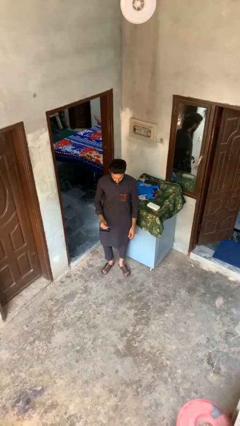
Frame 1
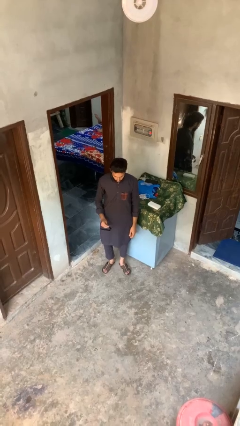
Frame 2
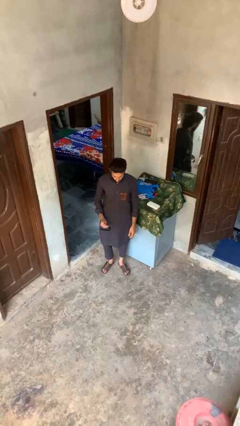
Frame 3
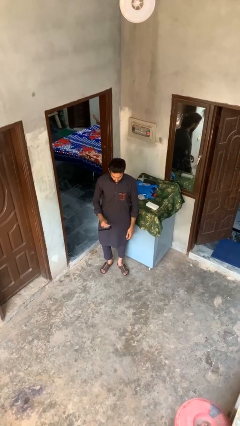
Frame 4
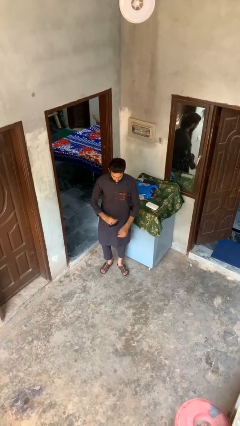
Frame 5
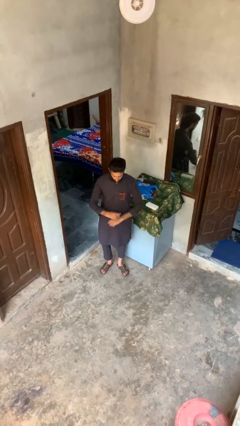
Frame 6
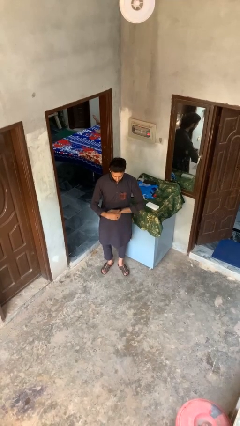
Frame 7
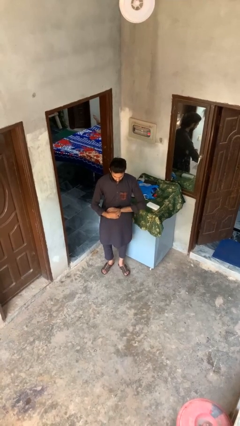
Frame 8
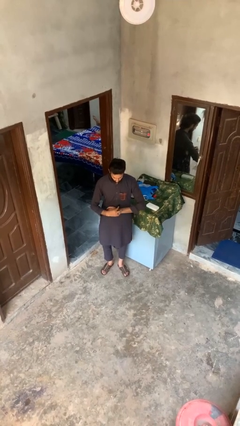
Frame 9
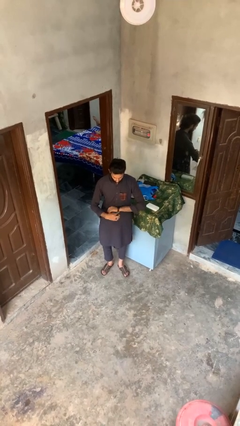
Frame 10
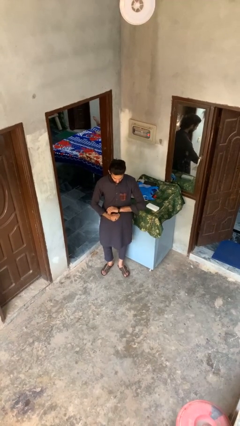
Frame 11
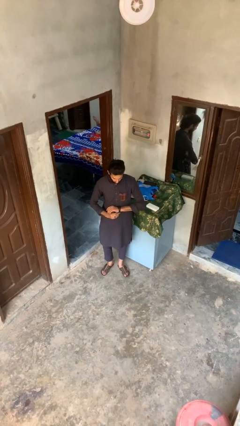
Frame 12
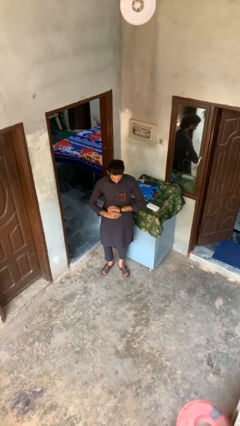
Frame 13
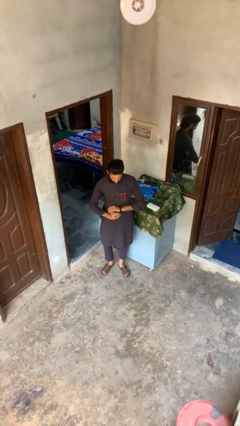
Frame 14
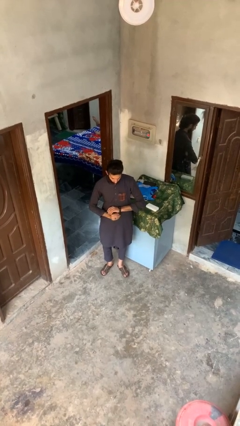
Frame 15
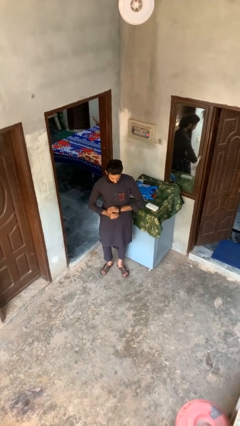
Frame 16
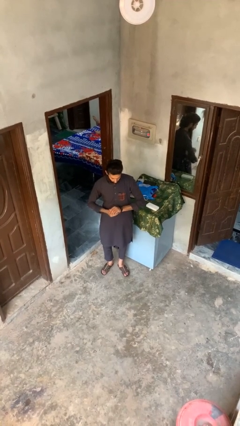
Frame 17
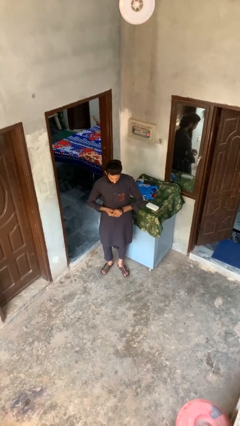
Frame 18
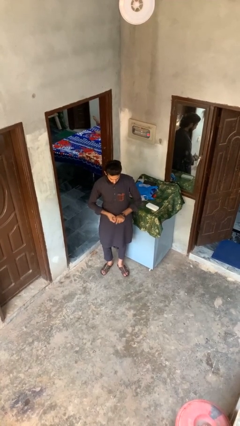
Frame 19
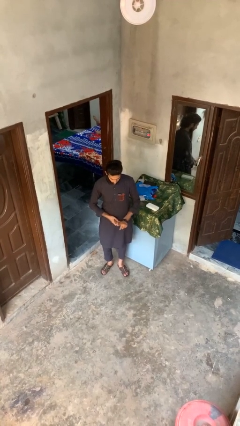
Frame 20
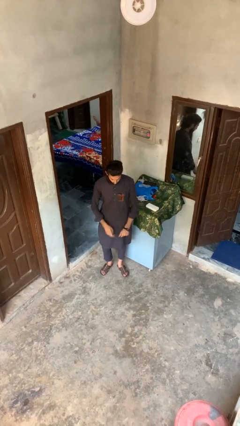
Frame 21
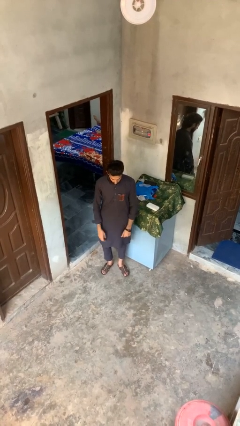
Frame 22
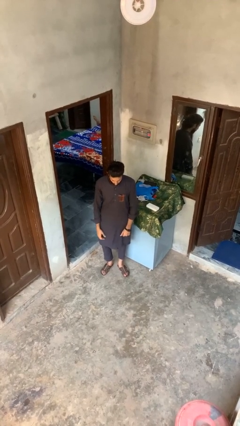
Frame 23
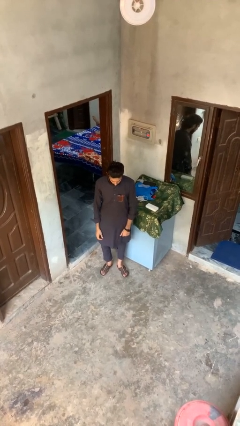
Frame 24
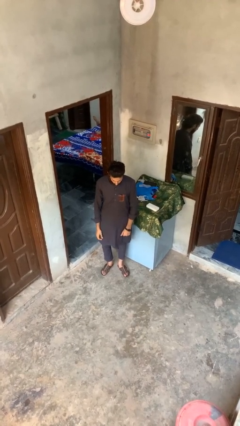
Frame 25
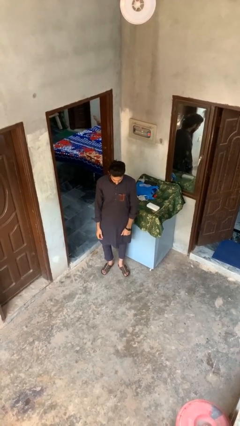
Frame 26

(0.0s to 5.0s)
person puts on wristwatch

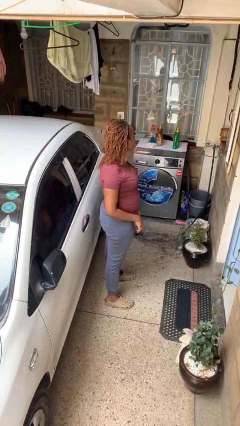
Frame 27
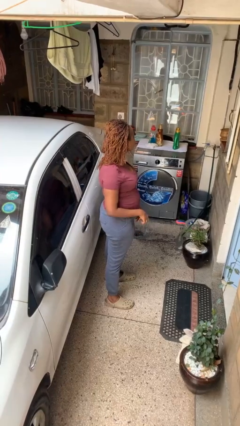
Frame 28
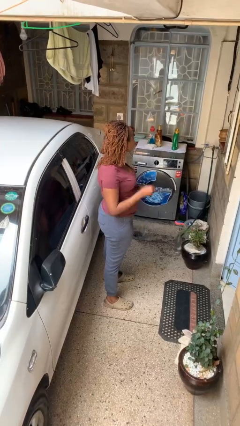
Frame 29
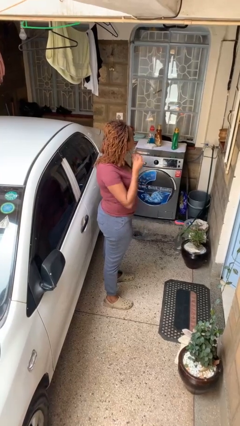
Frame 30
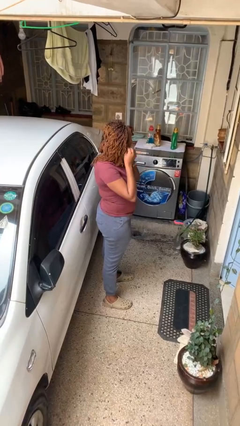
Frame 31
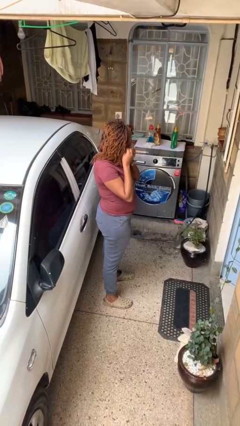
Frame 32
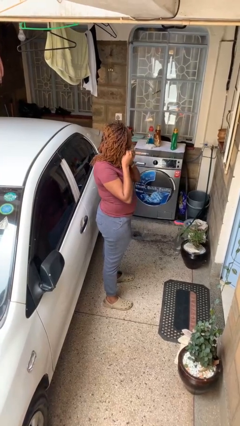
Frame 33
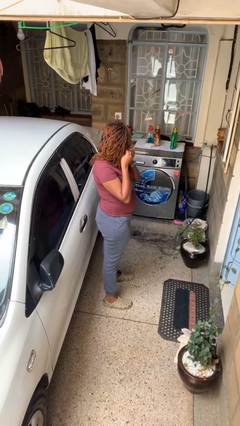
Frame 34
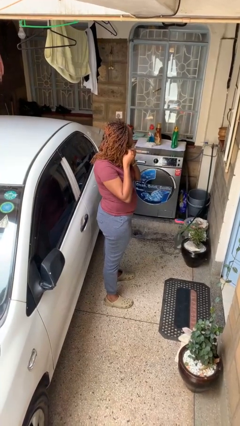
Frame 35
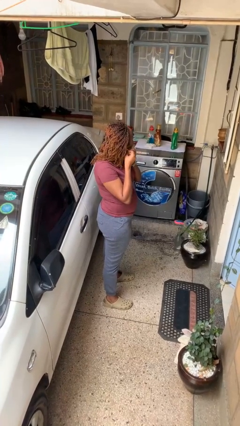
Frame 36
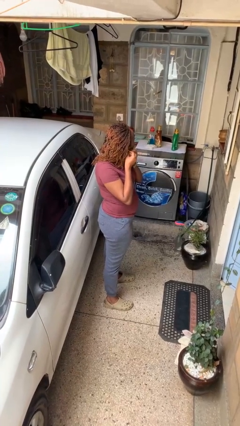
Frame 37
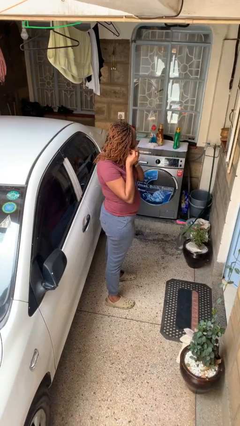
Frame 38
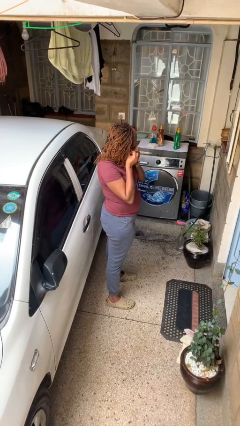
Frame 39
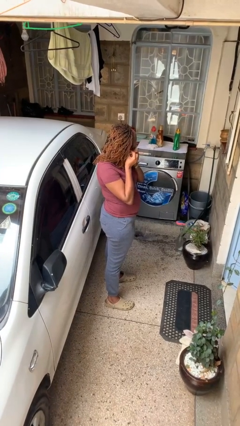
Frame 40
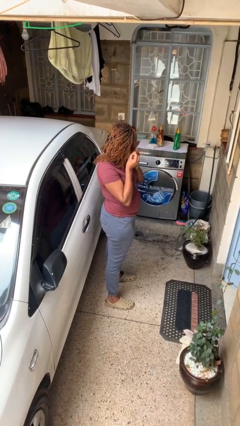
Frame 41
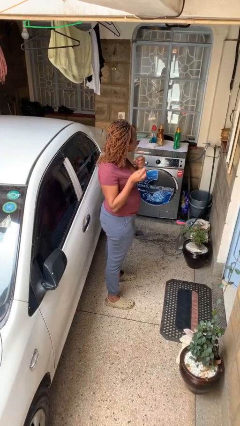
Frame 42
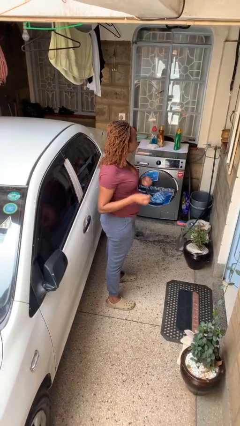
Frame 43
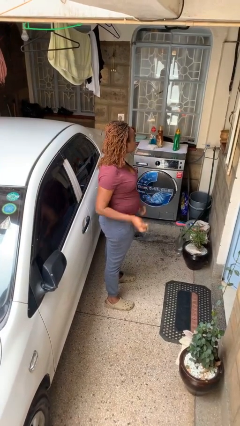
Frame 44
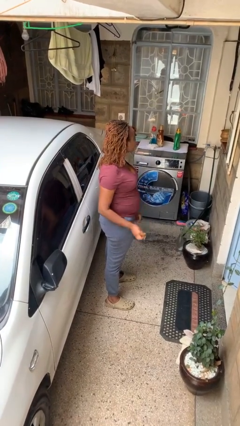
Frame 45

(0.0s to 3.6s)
person takes off earrings

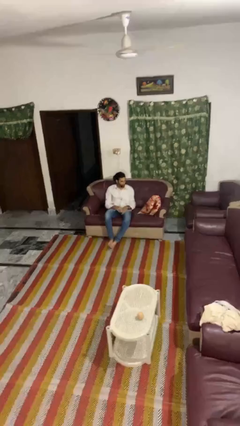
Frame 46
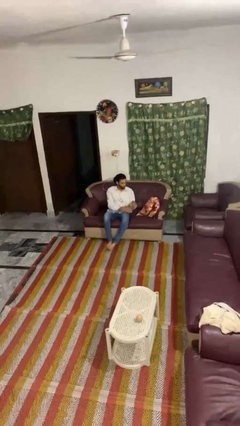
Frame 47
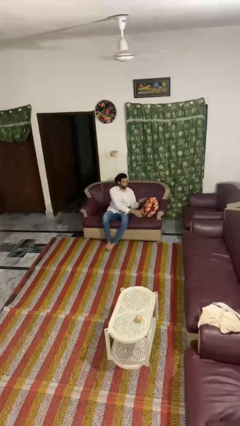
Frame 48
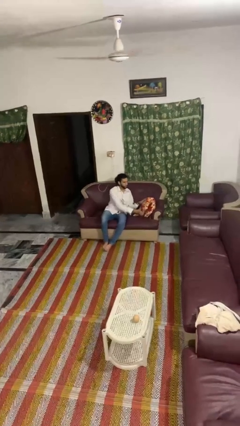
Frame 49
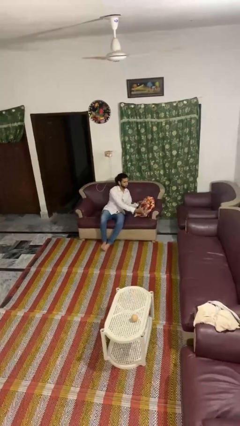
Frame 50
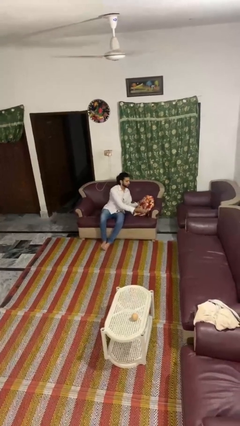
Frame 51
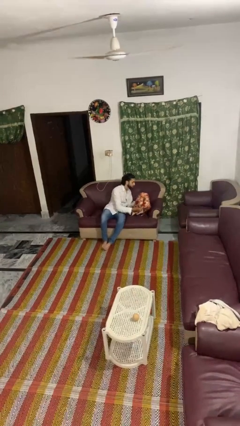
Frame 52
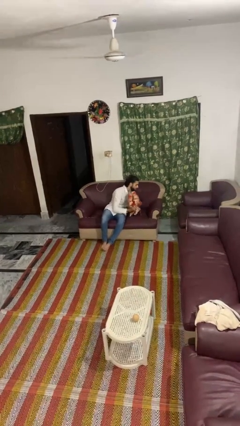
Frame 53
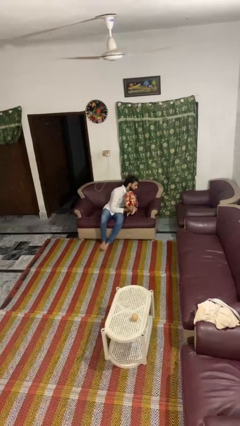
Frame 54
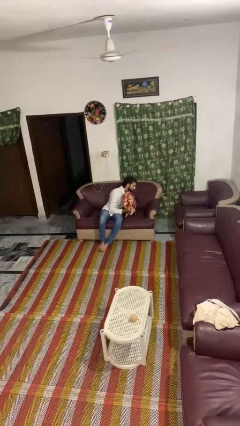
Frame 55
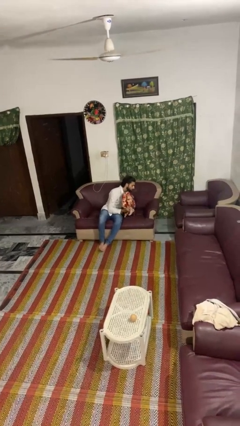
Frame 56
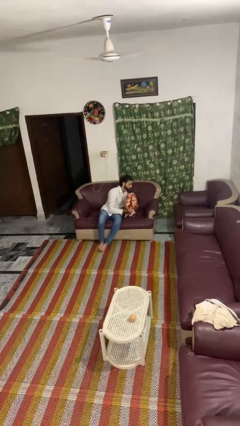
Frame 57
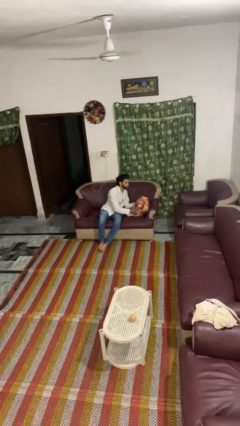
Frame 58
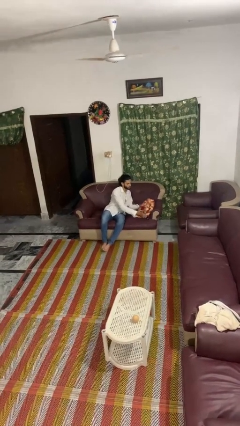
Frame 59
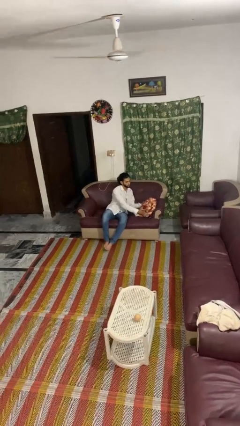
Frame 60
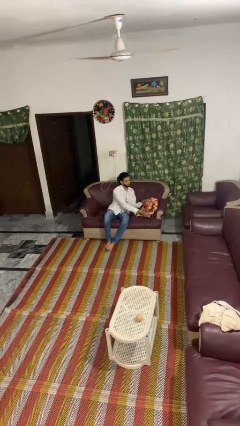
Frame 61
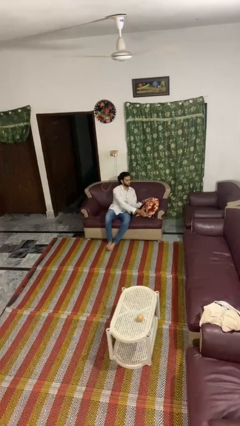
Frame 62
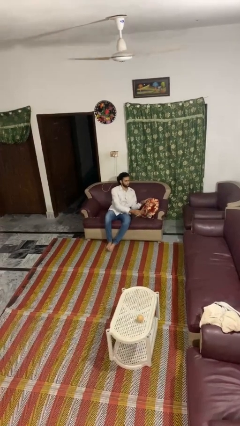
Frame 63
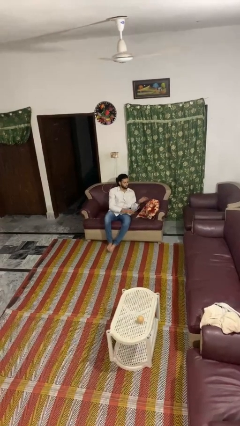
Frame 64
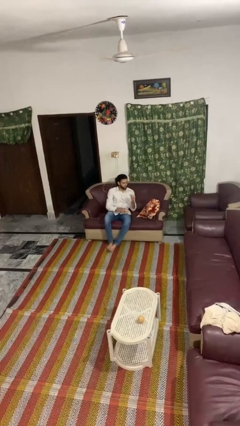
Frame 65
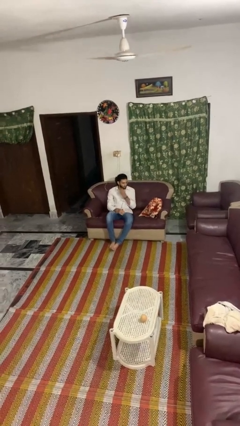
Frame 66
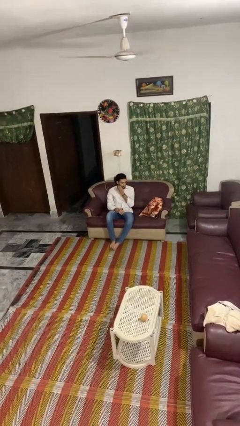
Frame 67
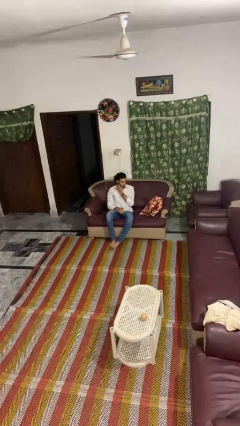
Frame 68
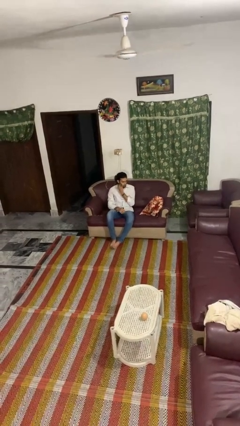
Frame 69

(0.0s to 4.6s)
person searches in couch

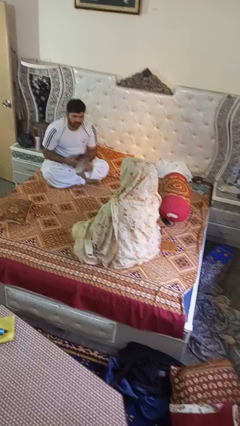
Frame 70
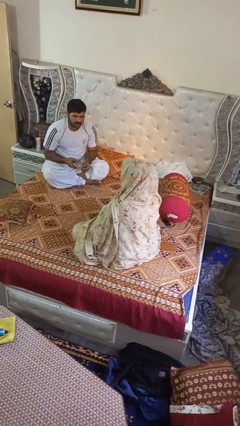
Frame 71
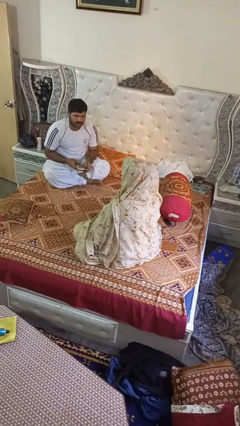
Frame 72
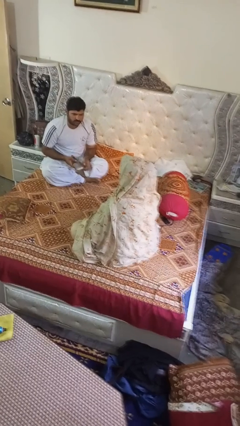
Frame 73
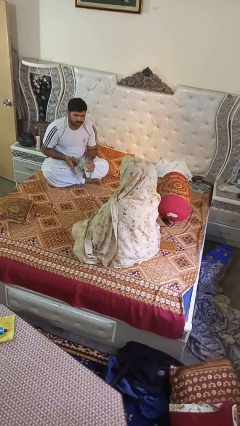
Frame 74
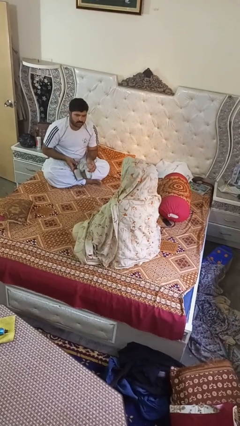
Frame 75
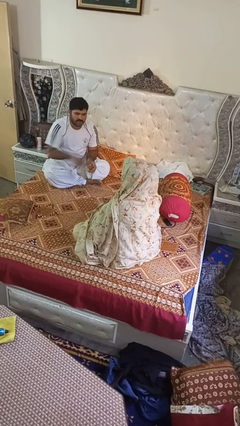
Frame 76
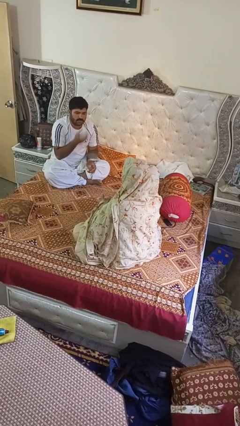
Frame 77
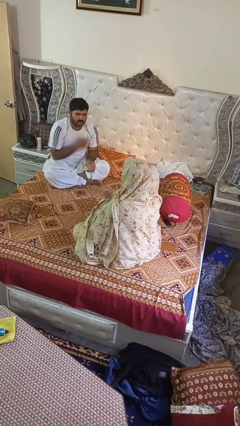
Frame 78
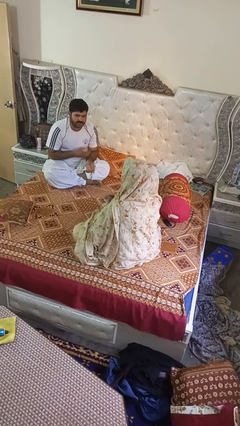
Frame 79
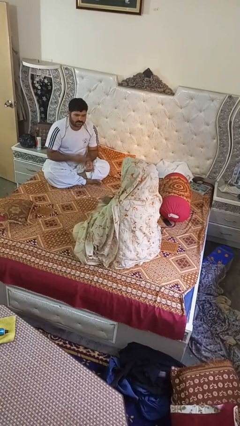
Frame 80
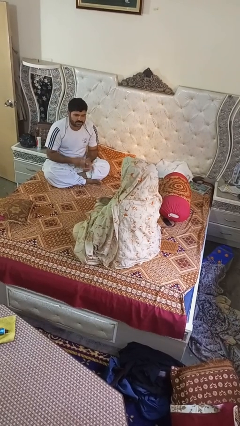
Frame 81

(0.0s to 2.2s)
person catches object from person

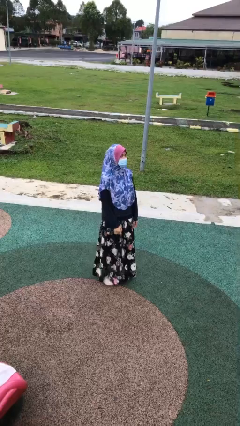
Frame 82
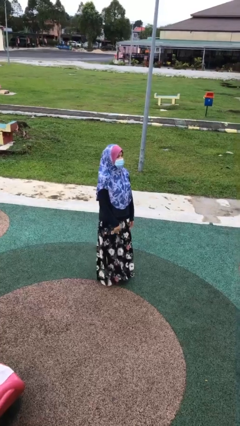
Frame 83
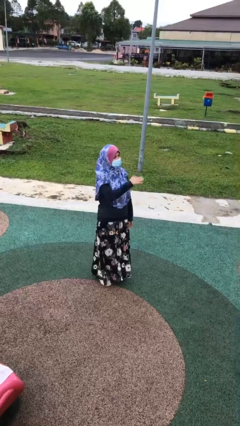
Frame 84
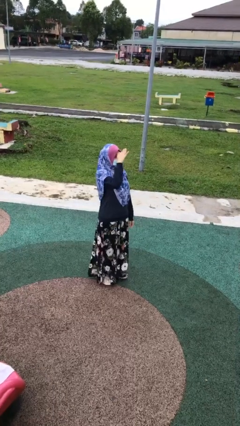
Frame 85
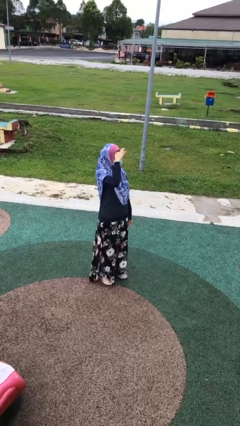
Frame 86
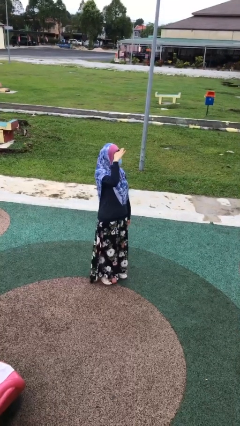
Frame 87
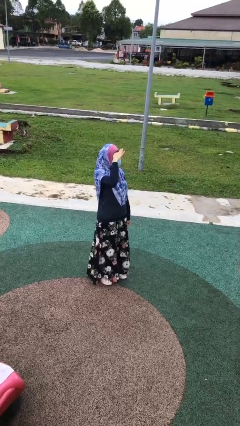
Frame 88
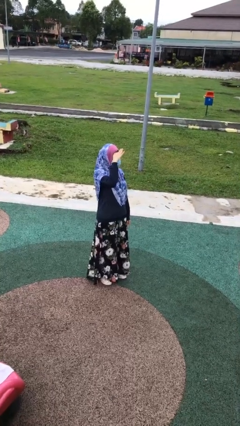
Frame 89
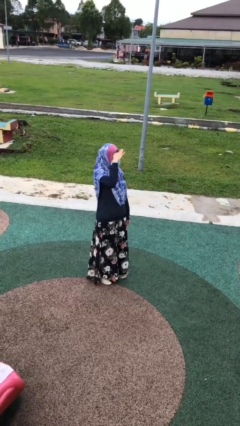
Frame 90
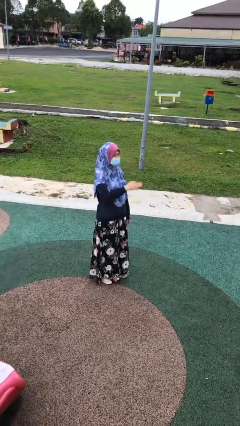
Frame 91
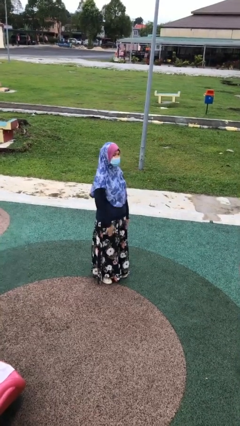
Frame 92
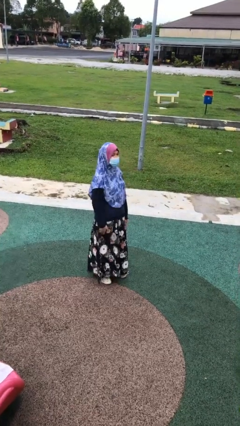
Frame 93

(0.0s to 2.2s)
person salutes
